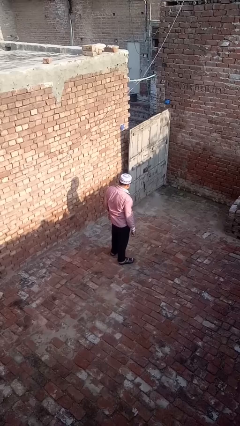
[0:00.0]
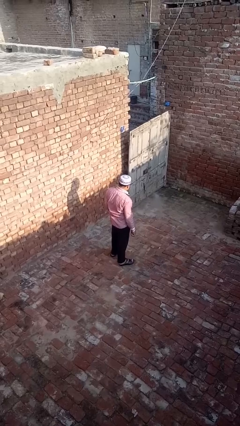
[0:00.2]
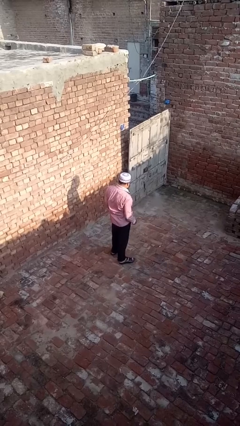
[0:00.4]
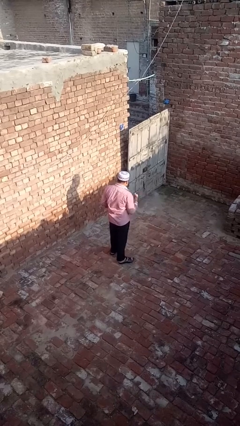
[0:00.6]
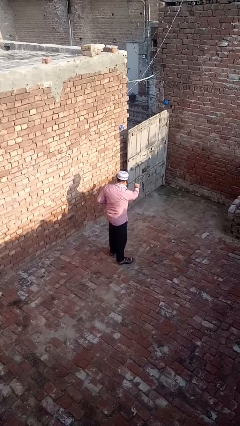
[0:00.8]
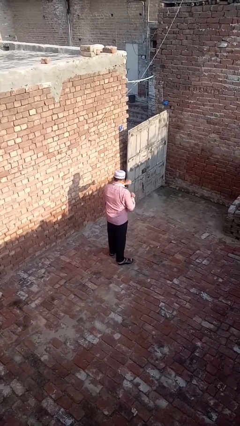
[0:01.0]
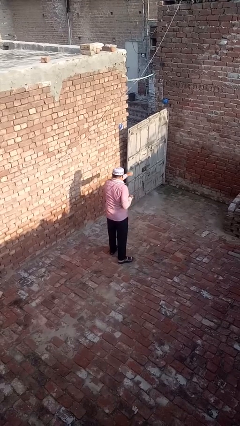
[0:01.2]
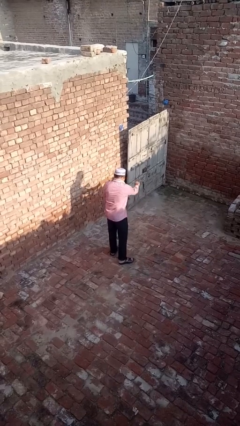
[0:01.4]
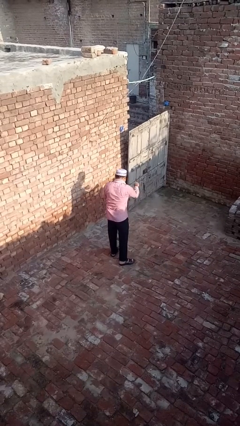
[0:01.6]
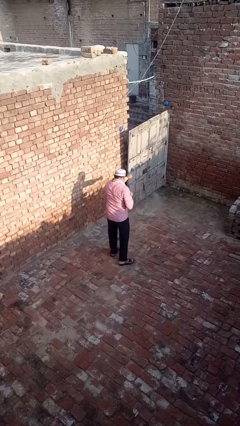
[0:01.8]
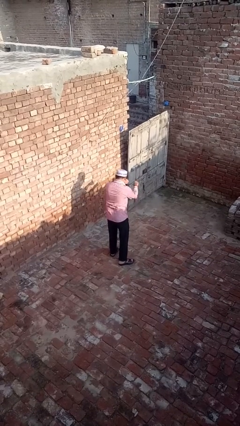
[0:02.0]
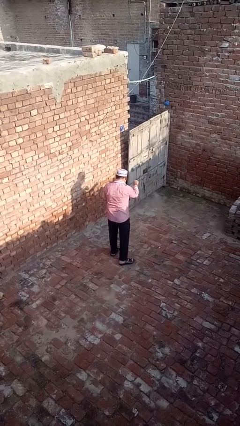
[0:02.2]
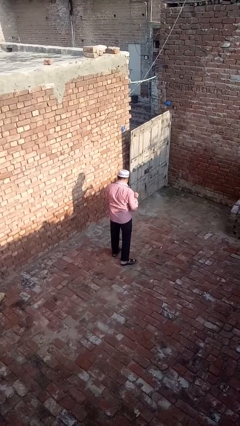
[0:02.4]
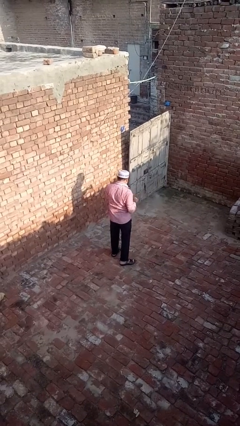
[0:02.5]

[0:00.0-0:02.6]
person punches

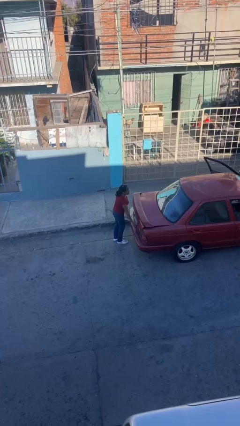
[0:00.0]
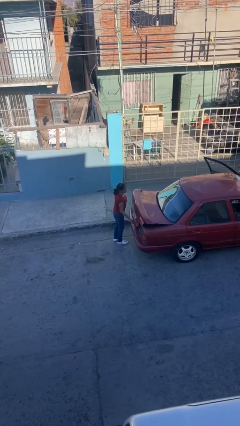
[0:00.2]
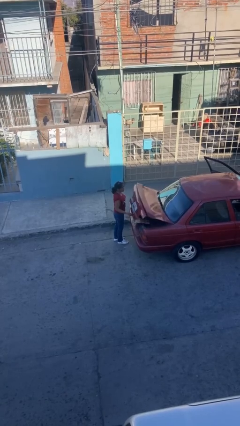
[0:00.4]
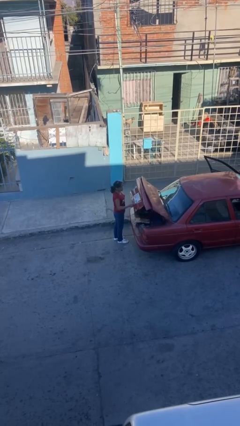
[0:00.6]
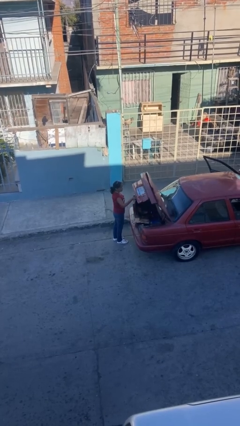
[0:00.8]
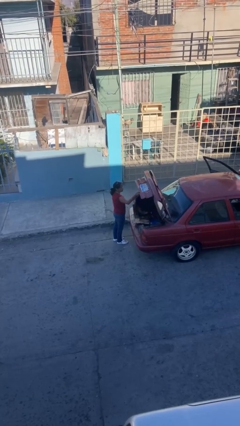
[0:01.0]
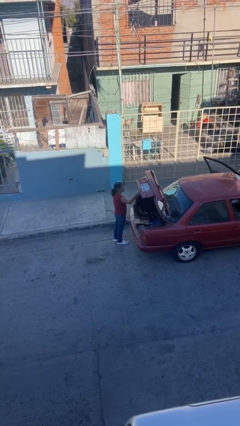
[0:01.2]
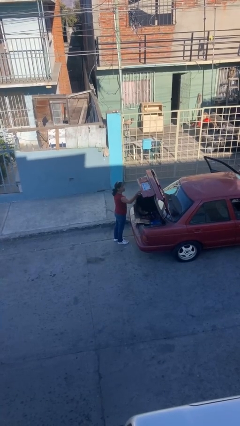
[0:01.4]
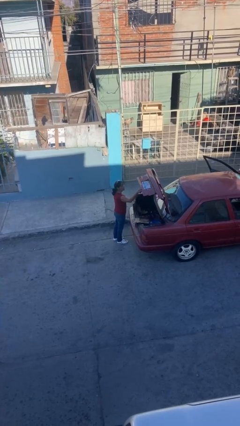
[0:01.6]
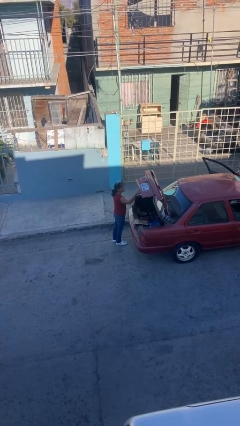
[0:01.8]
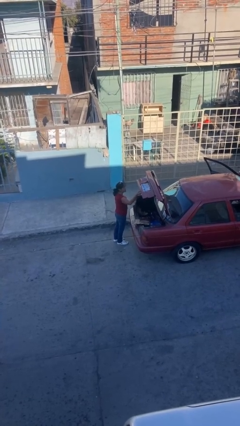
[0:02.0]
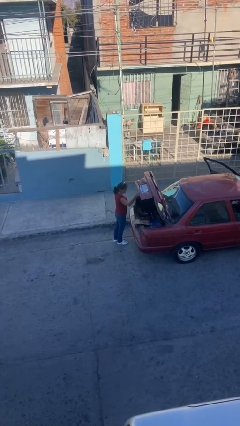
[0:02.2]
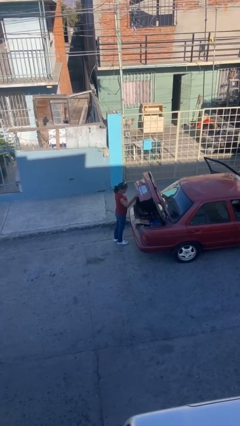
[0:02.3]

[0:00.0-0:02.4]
person opens car trunk

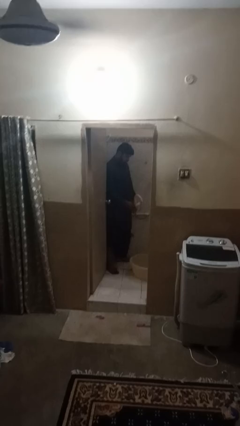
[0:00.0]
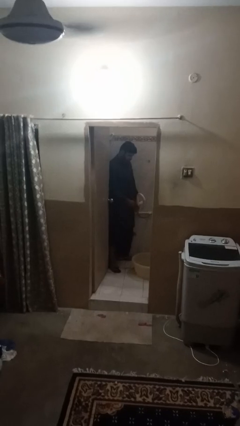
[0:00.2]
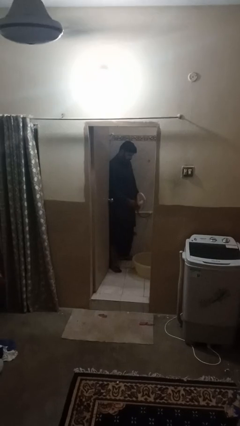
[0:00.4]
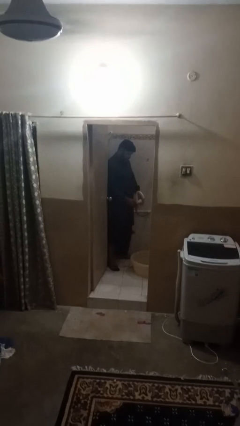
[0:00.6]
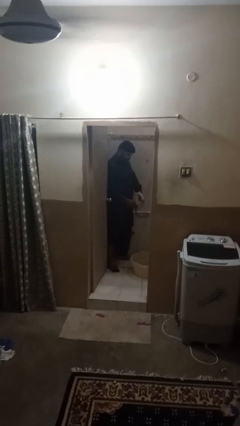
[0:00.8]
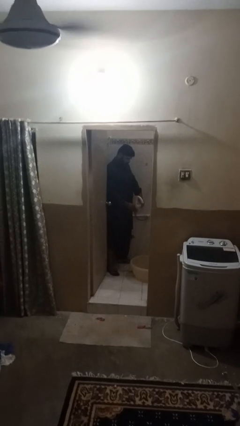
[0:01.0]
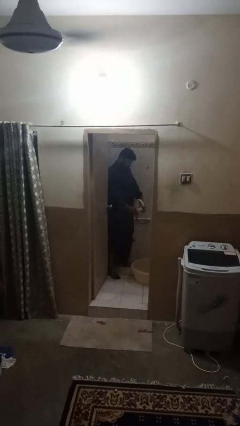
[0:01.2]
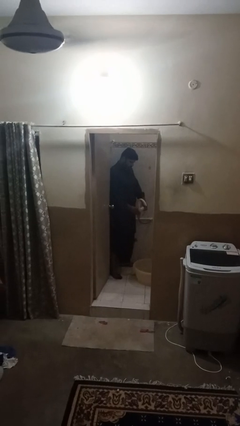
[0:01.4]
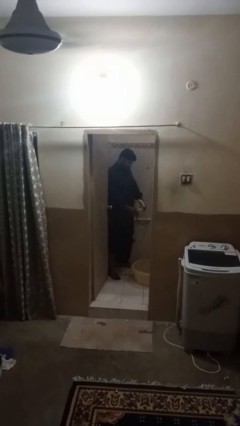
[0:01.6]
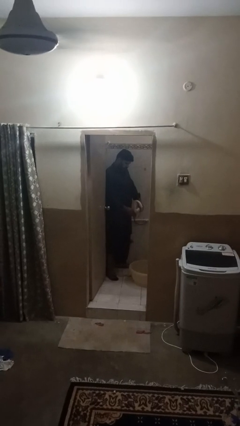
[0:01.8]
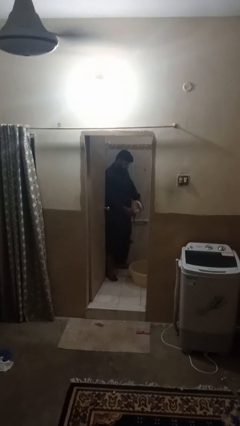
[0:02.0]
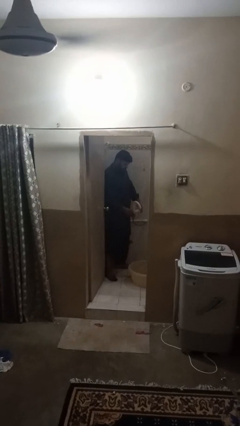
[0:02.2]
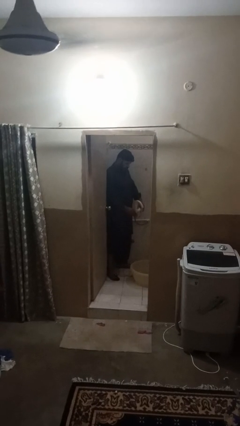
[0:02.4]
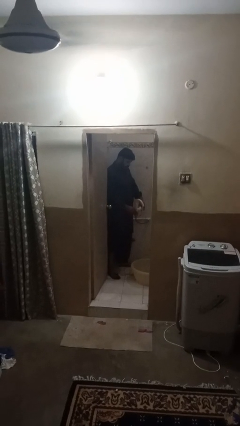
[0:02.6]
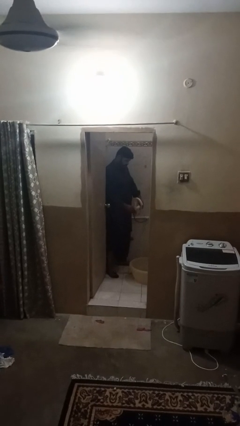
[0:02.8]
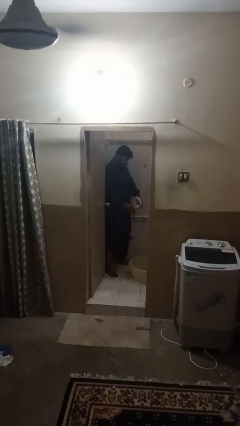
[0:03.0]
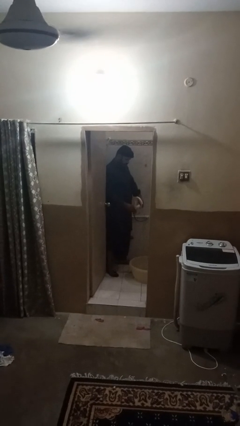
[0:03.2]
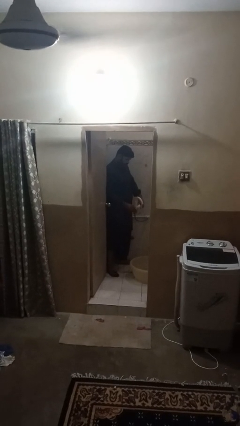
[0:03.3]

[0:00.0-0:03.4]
person turns on faucet

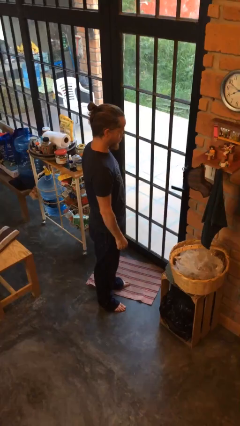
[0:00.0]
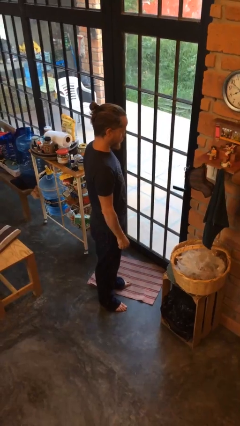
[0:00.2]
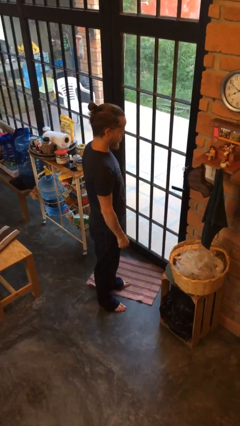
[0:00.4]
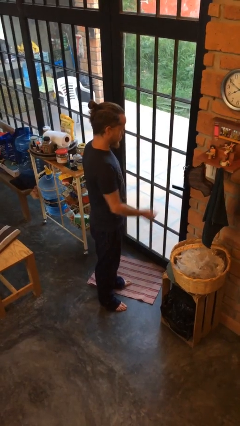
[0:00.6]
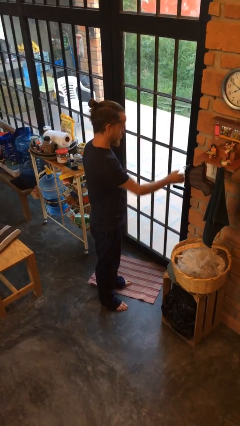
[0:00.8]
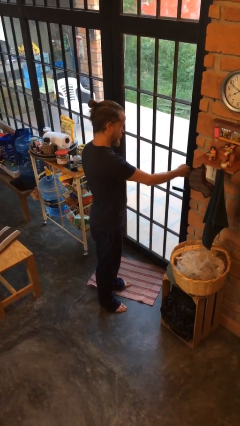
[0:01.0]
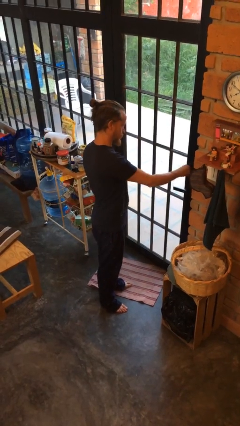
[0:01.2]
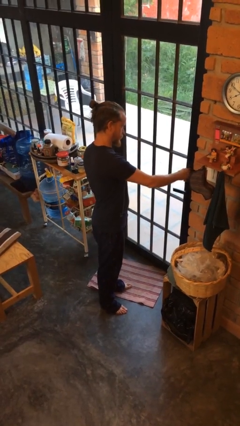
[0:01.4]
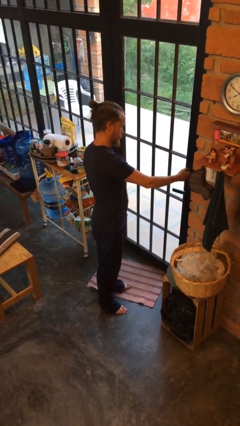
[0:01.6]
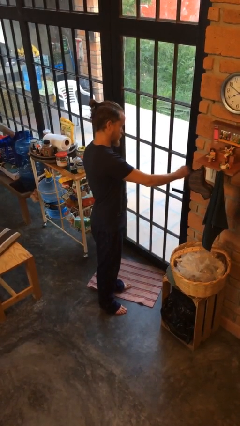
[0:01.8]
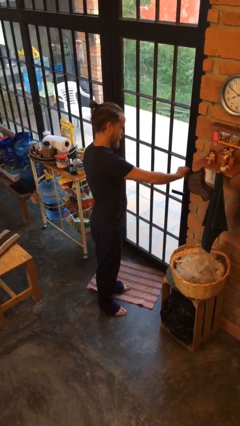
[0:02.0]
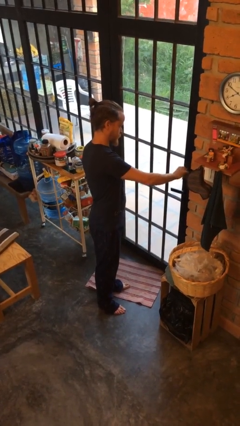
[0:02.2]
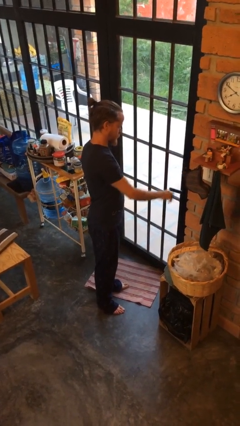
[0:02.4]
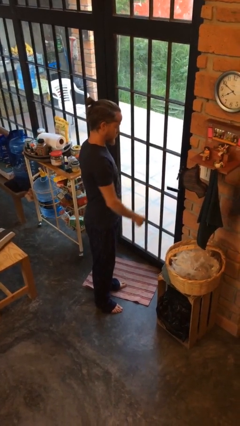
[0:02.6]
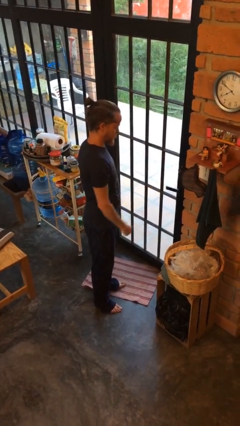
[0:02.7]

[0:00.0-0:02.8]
person unlocks door with keys

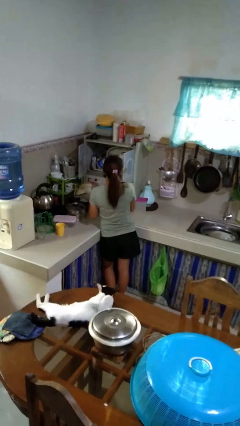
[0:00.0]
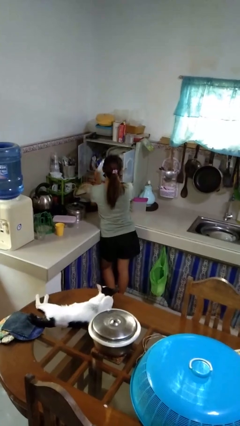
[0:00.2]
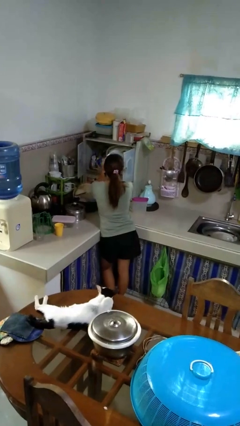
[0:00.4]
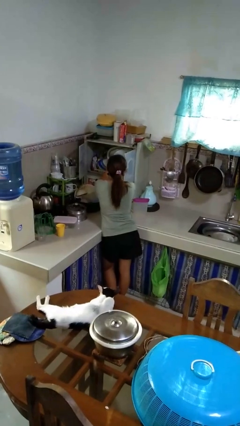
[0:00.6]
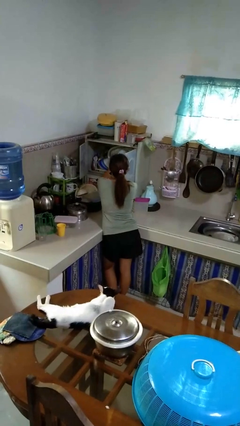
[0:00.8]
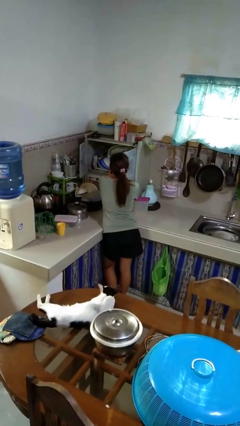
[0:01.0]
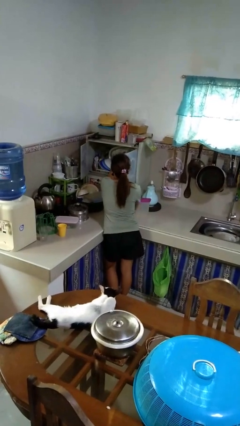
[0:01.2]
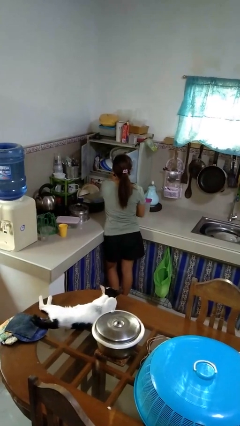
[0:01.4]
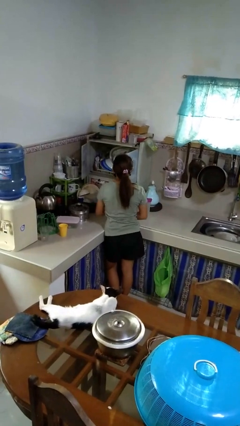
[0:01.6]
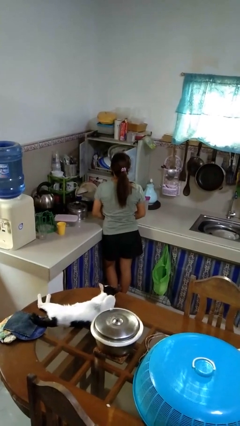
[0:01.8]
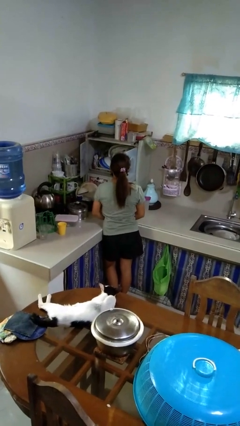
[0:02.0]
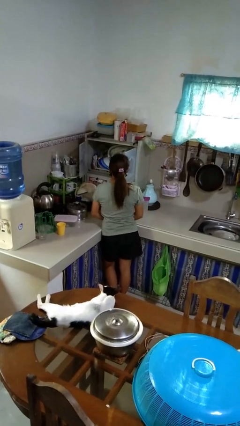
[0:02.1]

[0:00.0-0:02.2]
person puts object into kitchen drawer

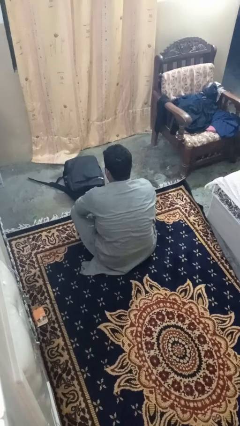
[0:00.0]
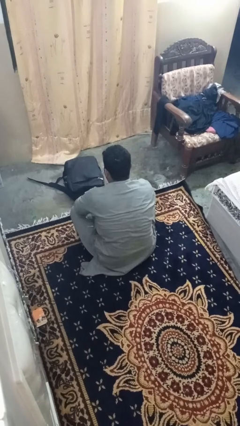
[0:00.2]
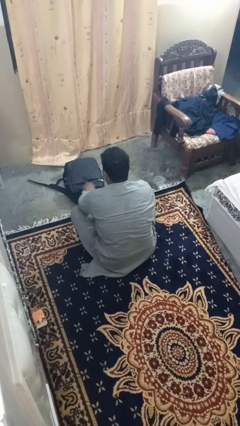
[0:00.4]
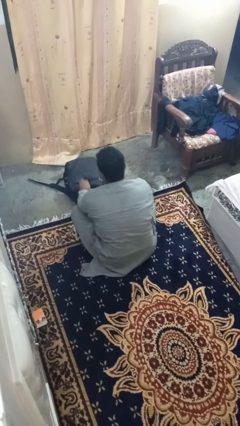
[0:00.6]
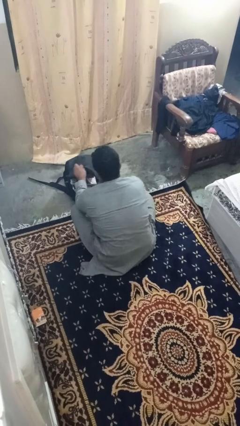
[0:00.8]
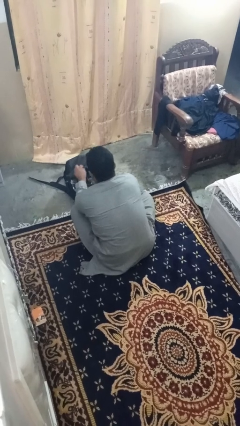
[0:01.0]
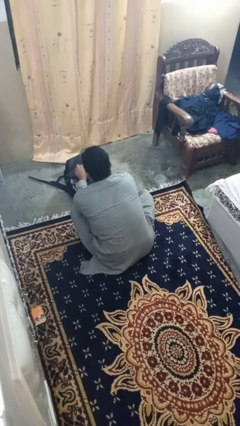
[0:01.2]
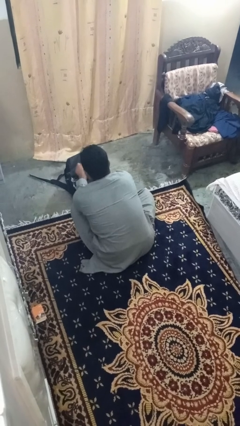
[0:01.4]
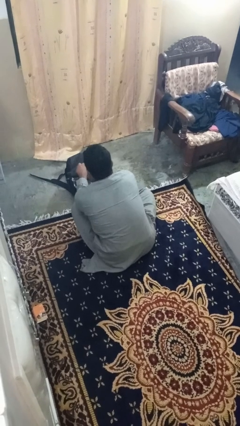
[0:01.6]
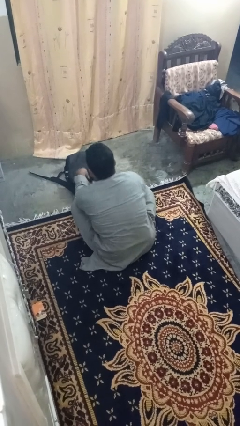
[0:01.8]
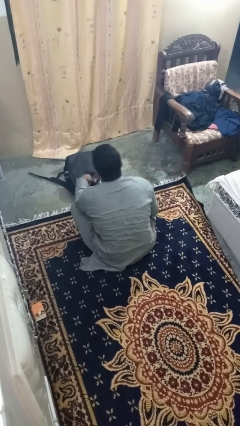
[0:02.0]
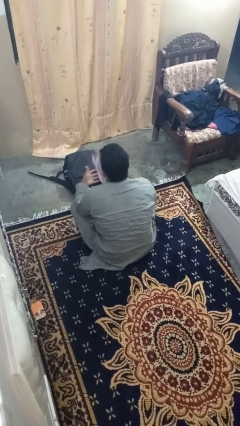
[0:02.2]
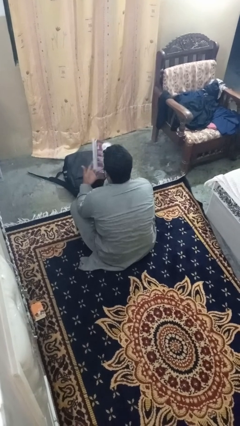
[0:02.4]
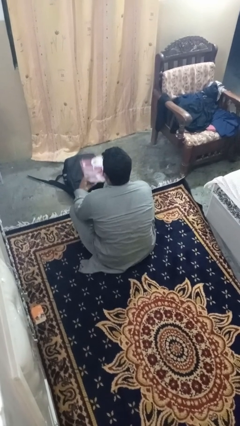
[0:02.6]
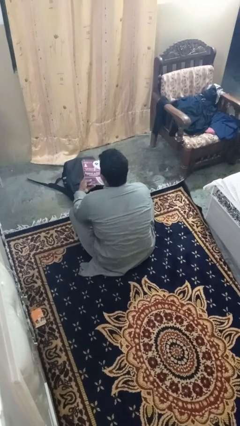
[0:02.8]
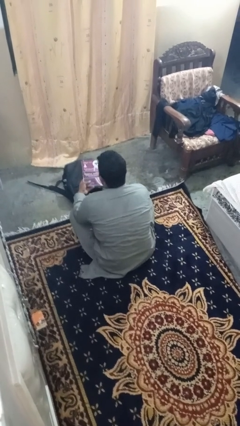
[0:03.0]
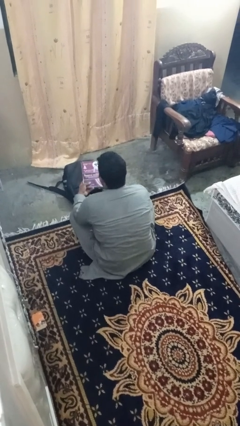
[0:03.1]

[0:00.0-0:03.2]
person takes object from bag

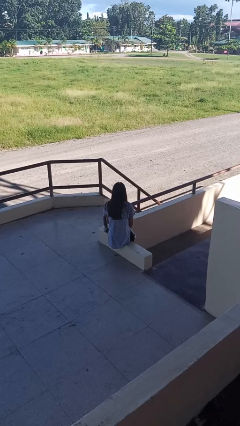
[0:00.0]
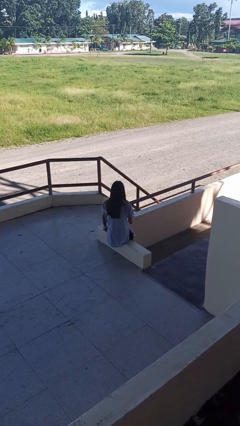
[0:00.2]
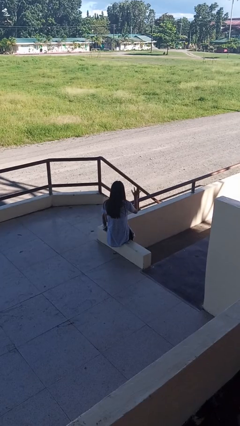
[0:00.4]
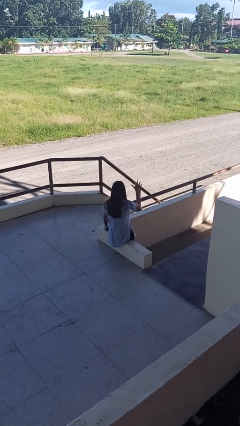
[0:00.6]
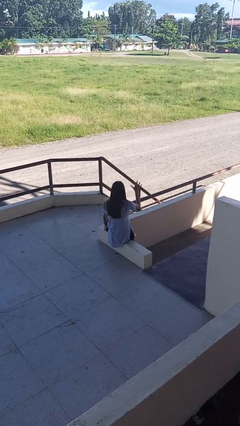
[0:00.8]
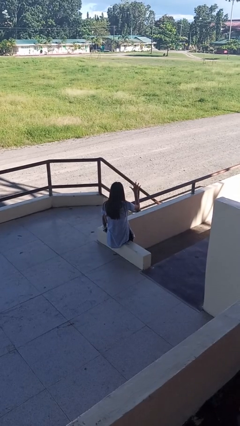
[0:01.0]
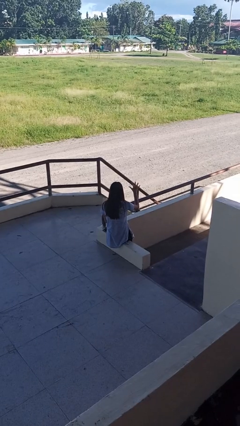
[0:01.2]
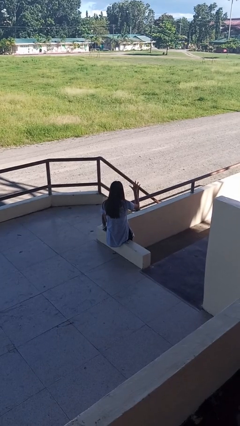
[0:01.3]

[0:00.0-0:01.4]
person gestures number five
